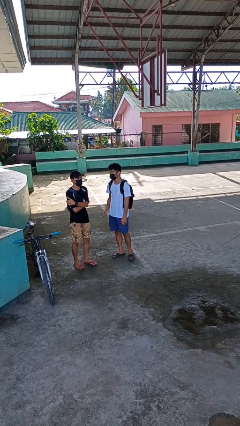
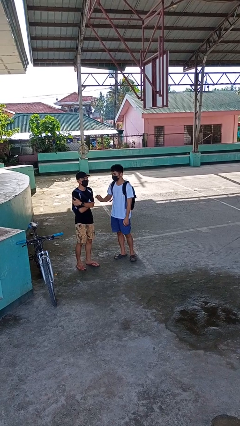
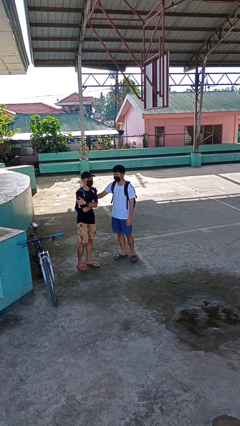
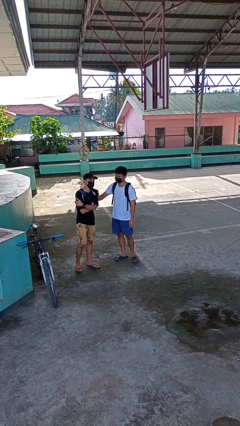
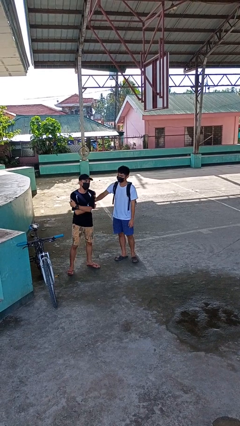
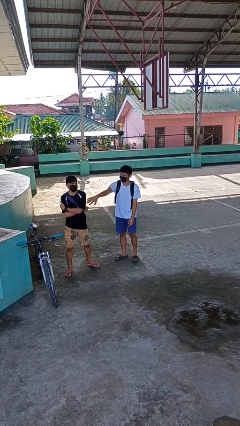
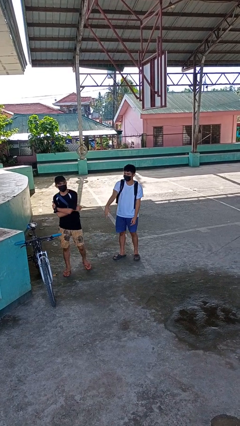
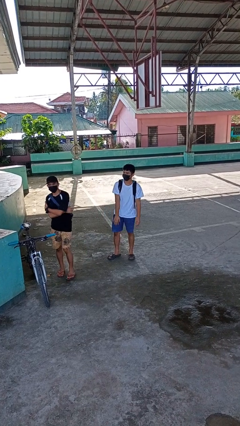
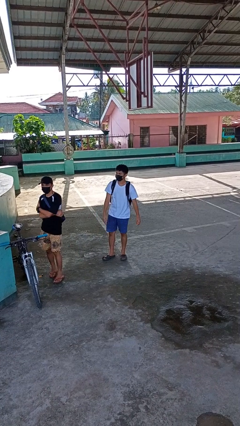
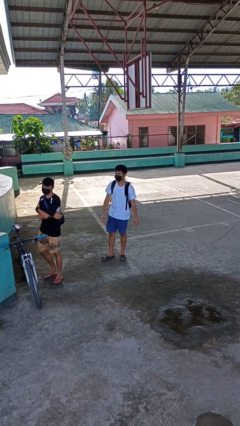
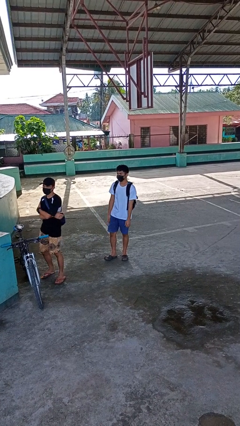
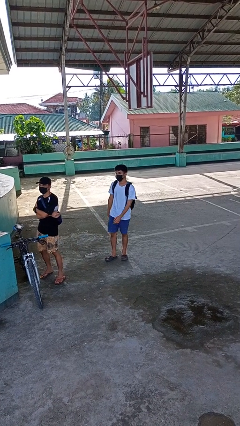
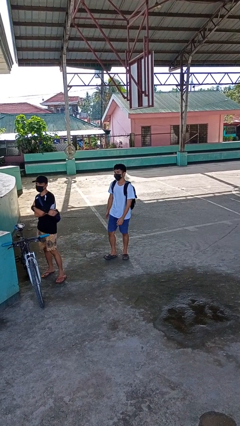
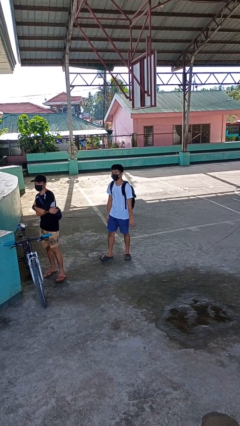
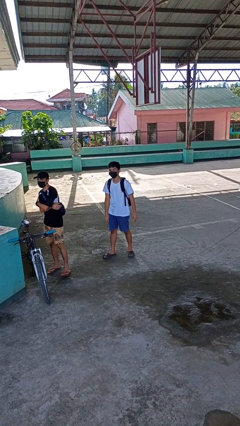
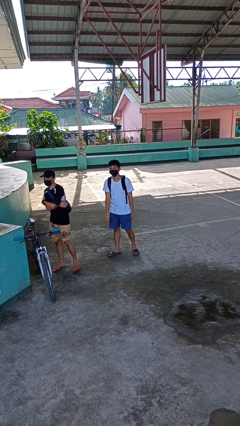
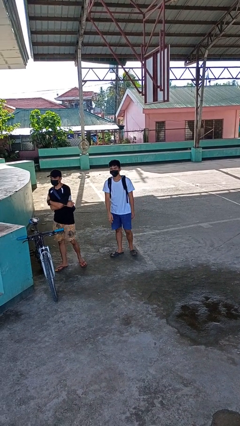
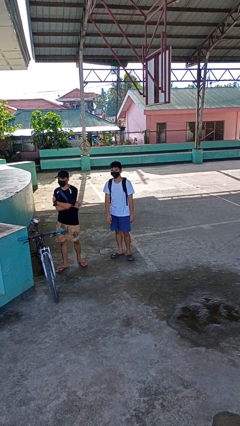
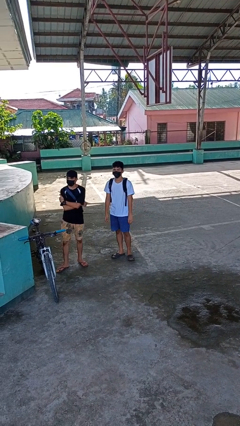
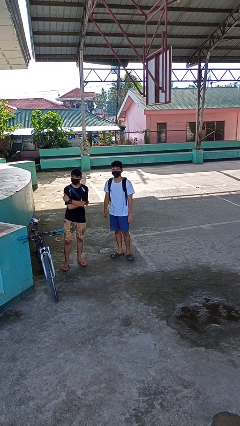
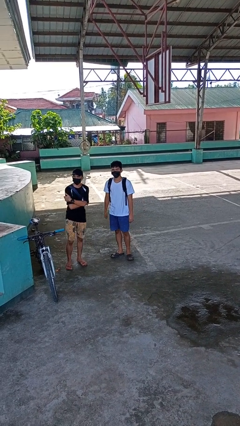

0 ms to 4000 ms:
person shoves person

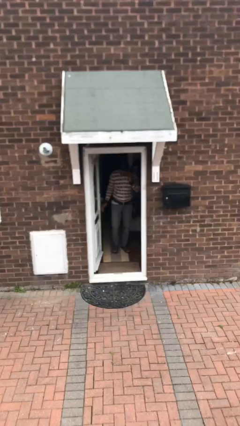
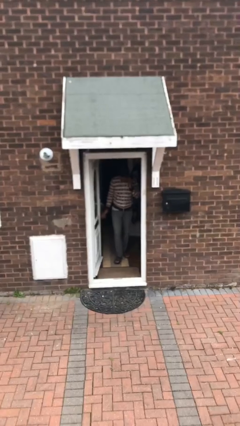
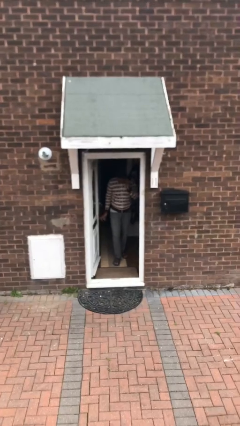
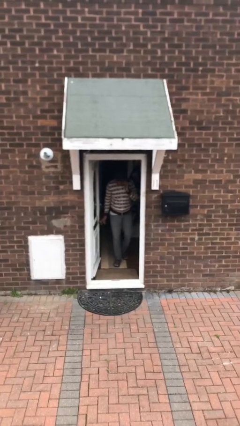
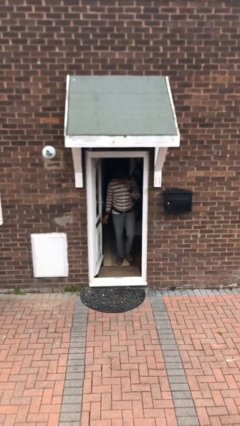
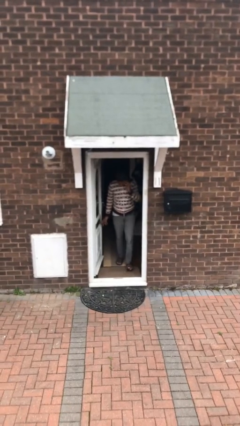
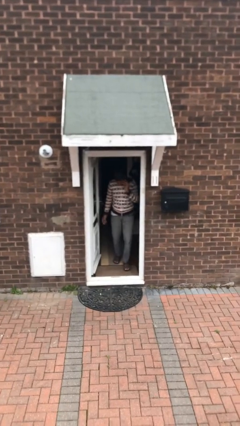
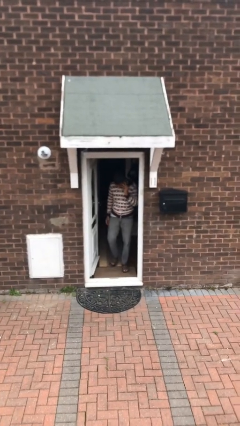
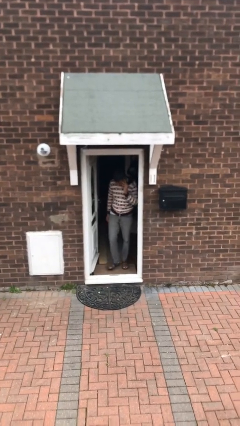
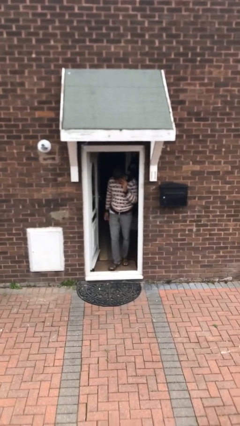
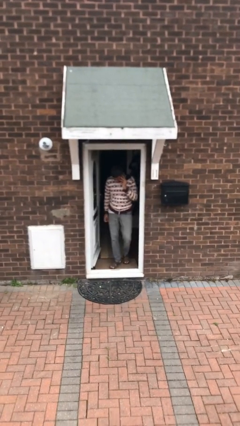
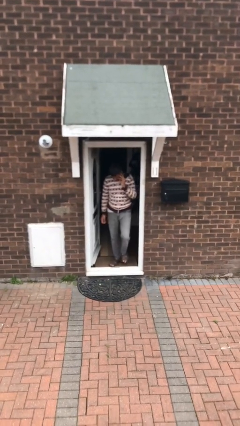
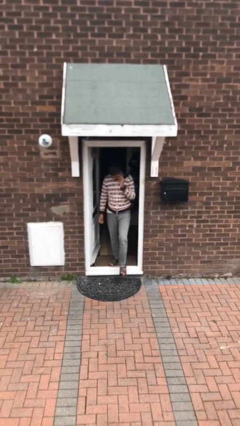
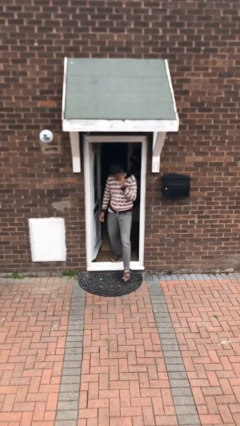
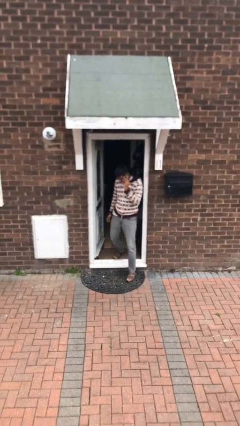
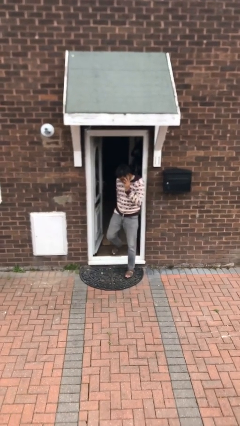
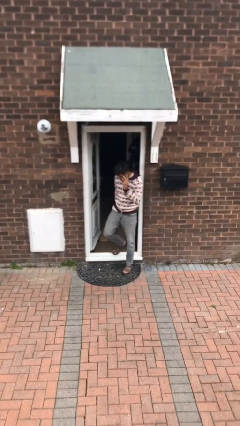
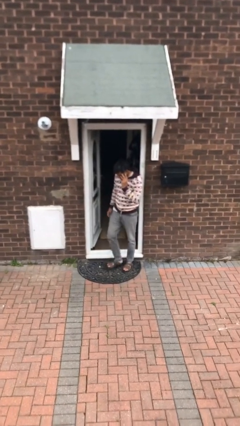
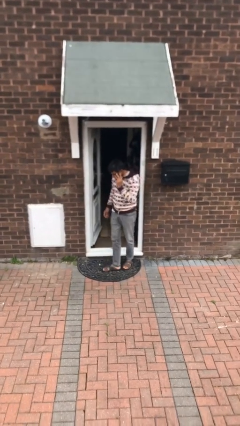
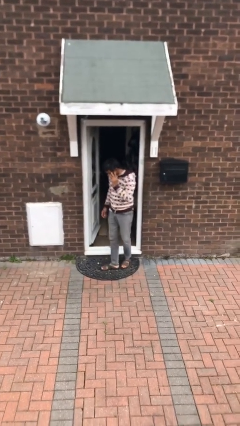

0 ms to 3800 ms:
person enters scene through structure

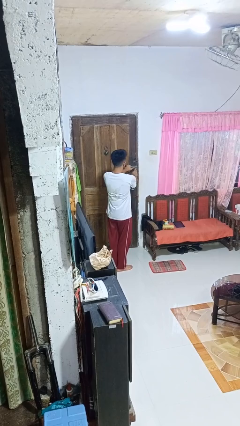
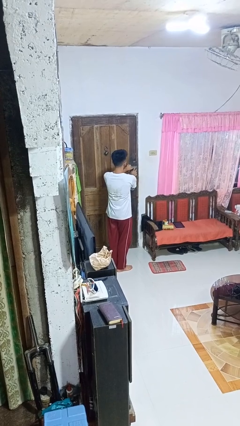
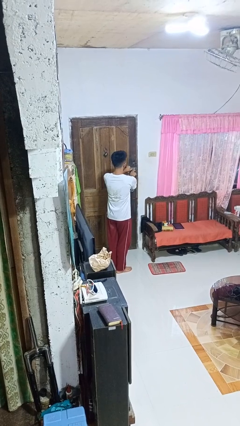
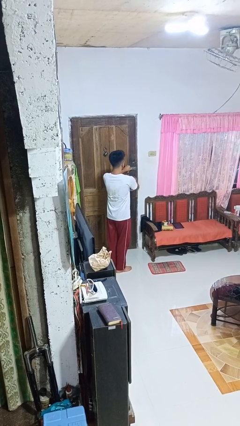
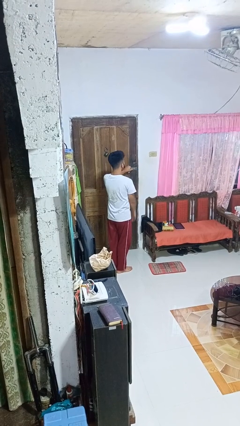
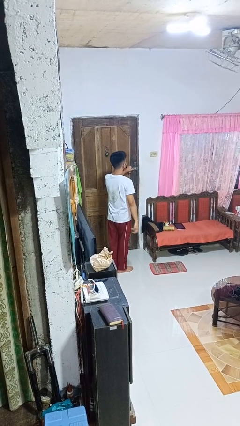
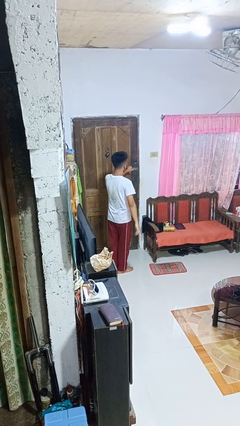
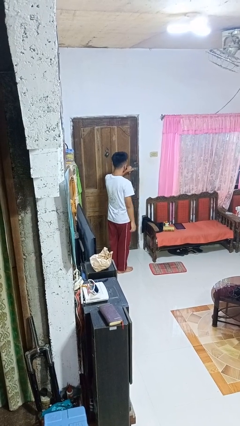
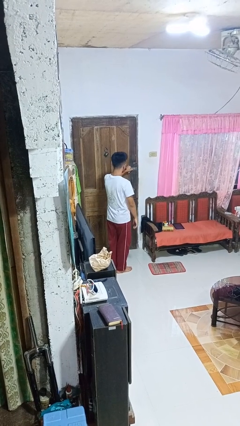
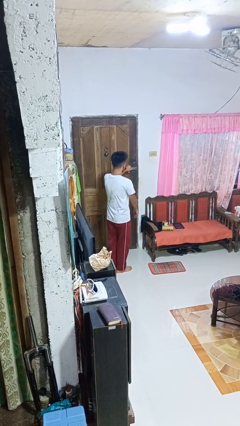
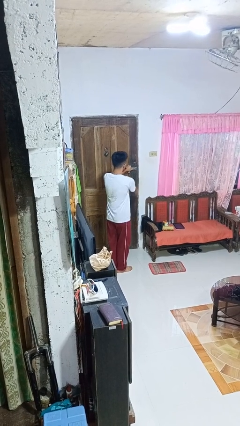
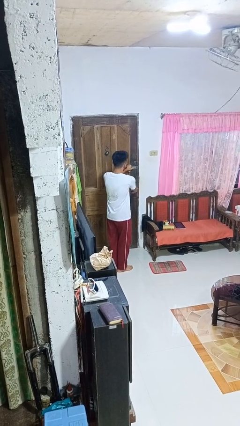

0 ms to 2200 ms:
person unlocks door with keys

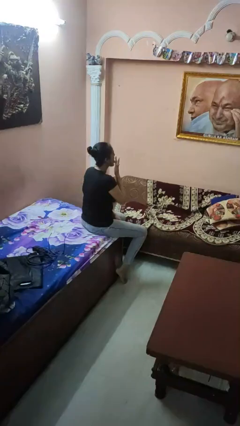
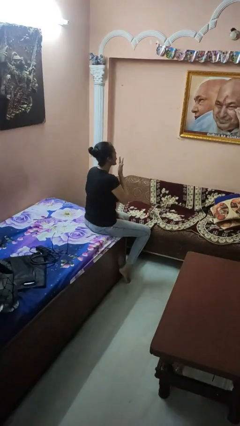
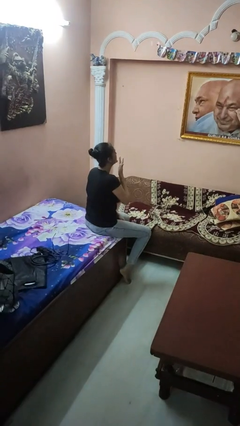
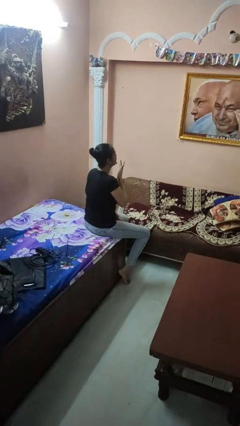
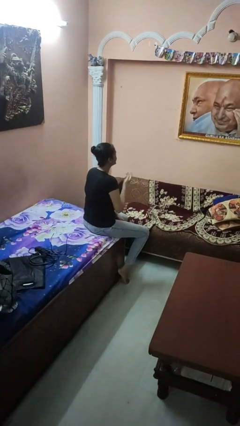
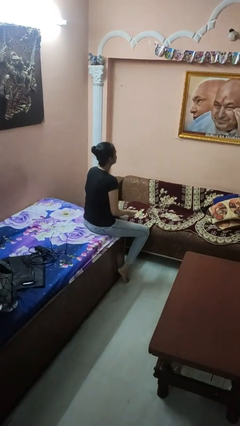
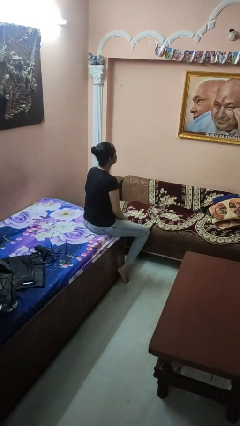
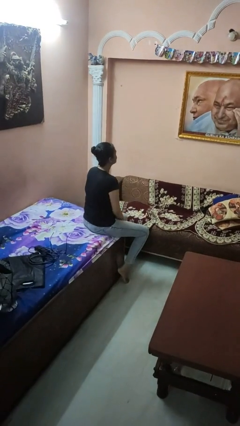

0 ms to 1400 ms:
person licks fingers

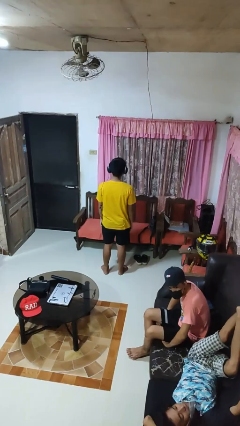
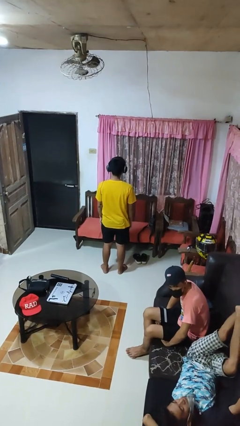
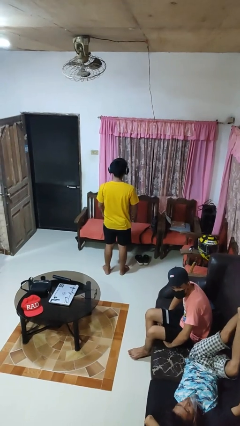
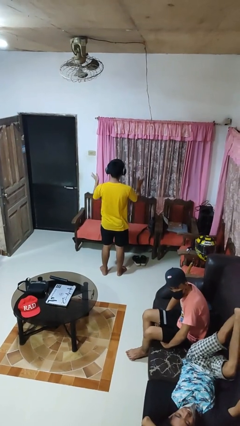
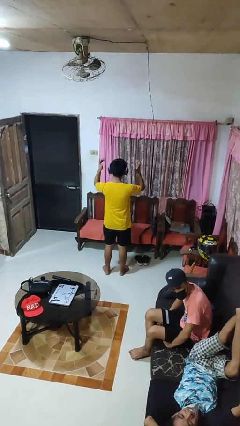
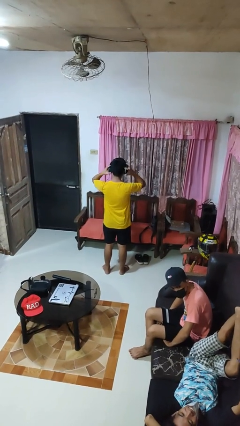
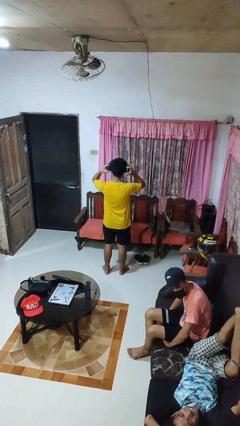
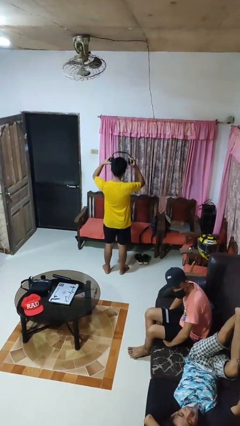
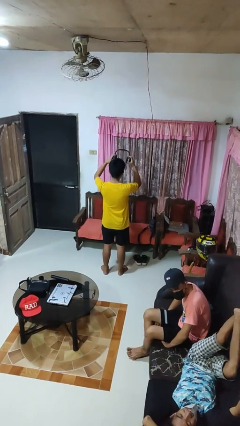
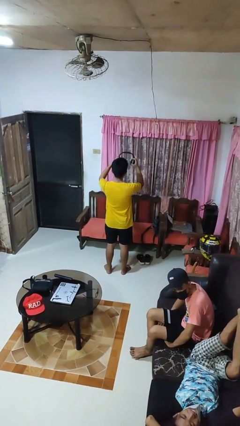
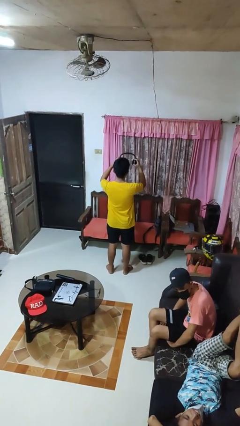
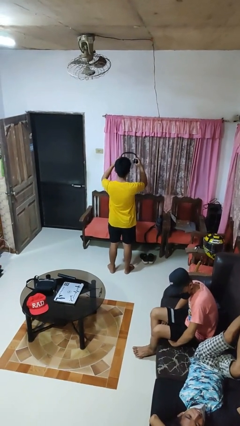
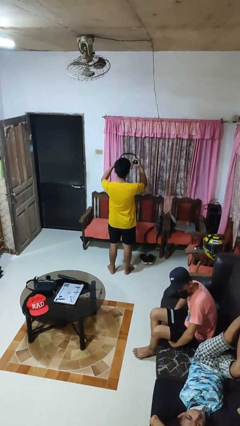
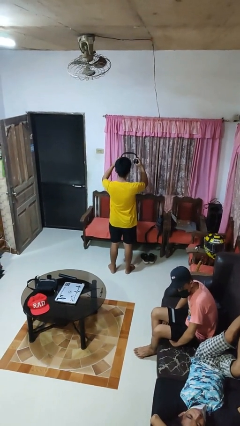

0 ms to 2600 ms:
person takes off headphones

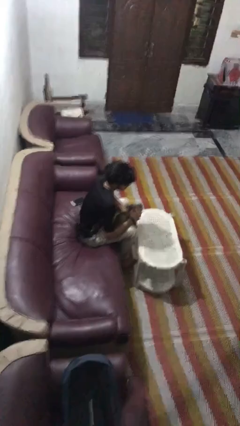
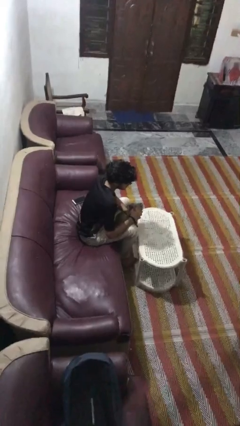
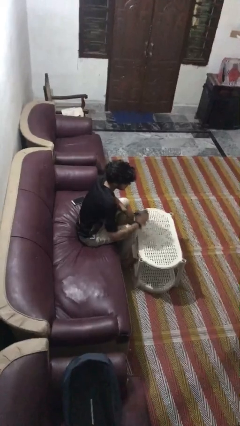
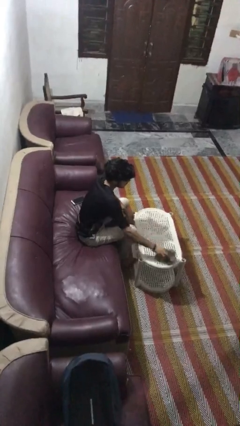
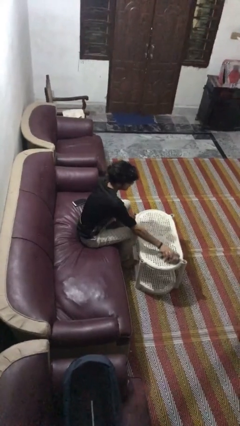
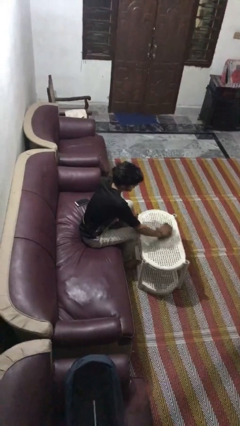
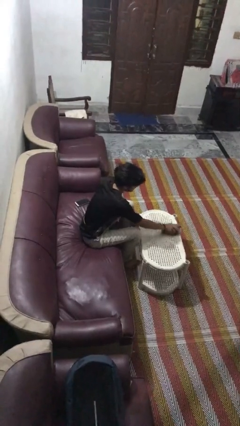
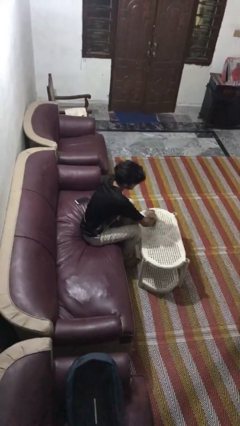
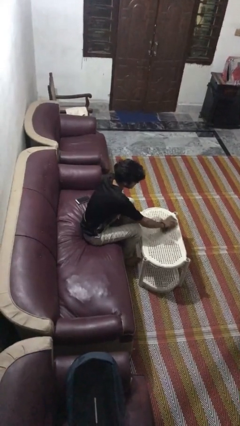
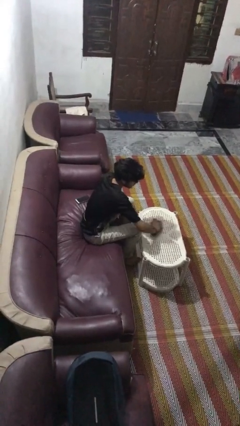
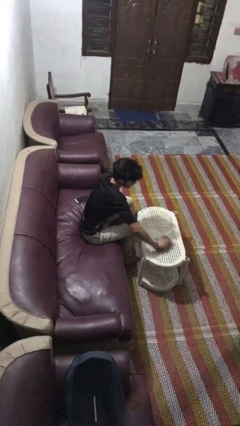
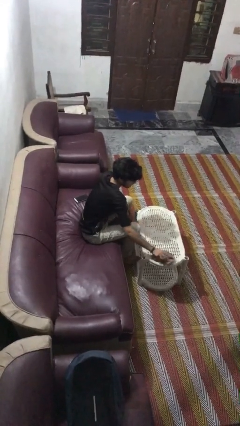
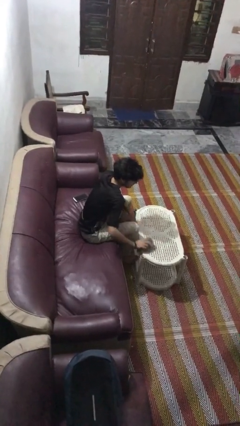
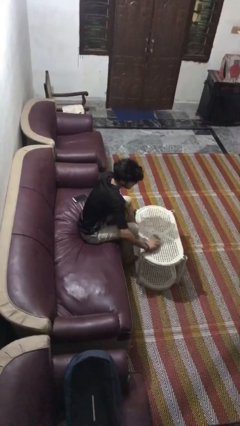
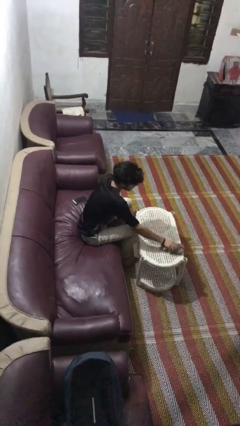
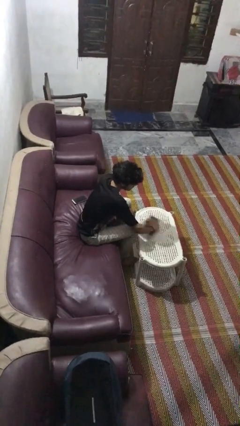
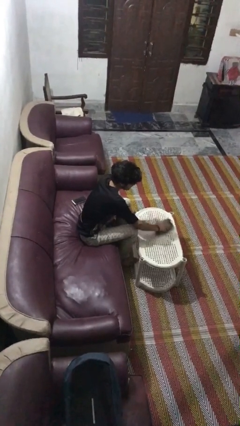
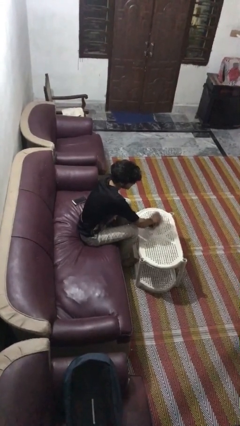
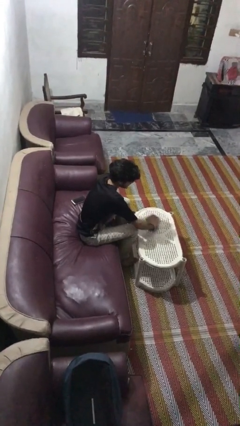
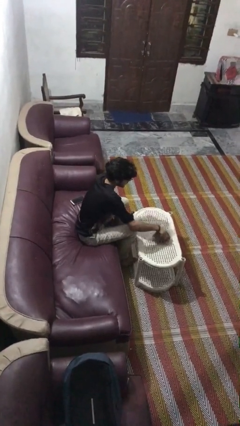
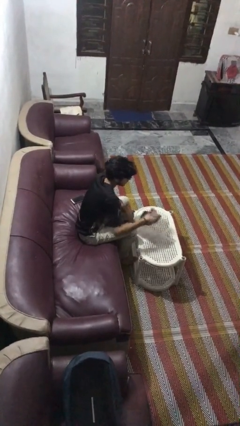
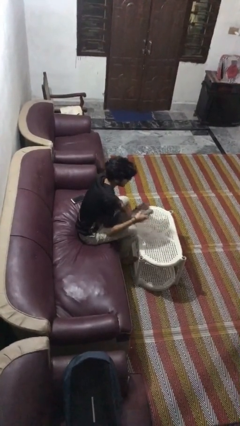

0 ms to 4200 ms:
person cleans table with rag
